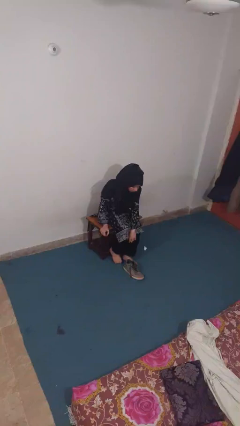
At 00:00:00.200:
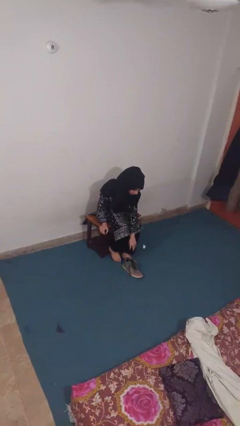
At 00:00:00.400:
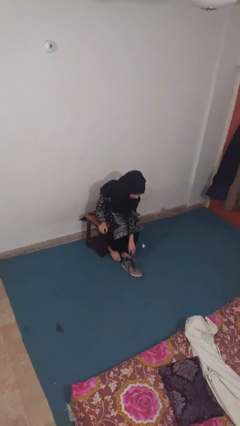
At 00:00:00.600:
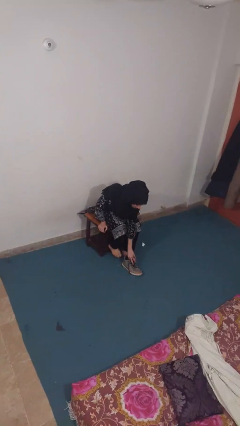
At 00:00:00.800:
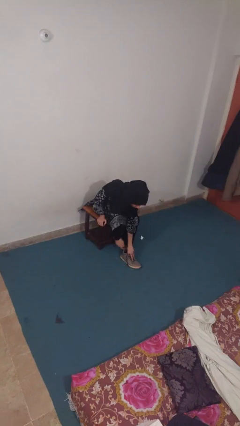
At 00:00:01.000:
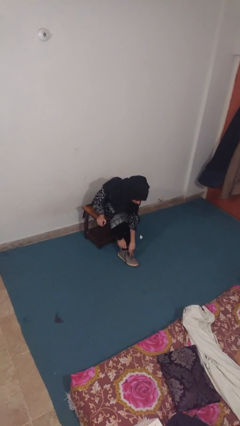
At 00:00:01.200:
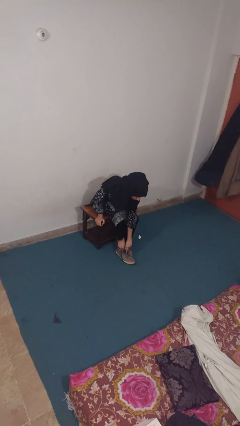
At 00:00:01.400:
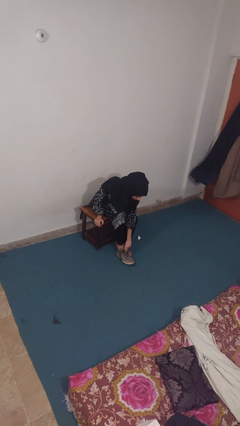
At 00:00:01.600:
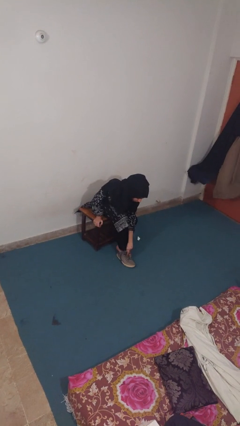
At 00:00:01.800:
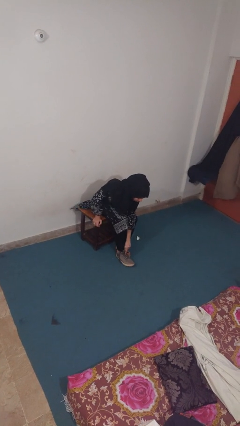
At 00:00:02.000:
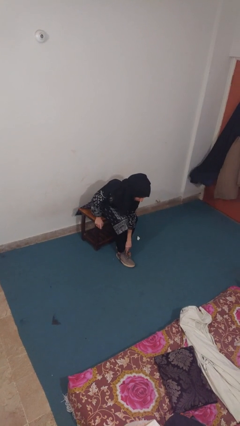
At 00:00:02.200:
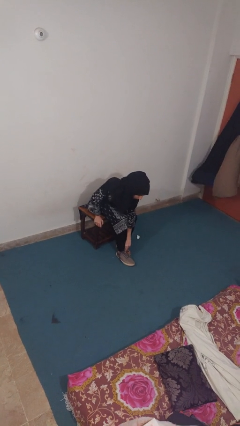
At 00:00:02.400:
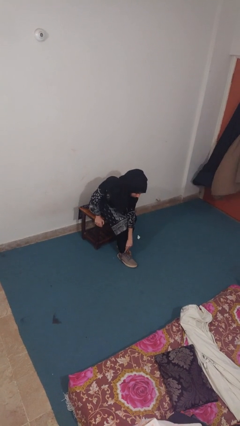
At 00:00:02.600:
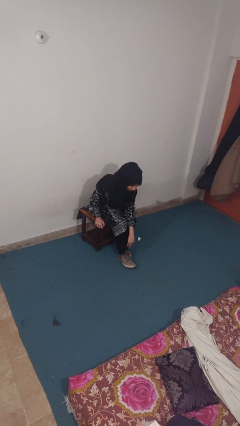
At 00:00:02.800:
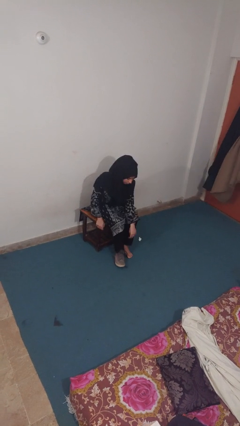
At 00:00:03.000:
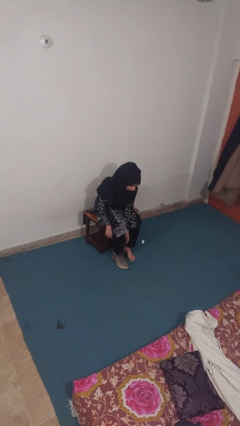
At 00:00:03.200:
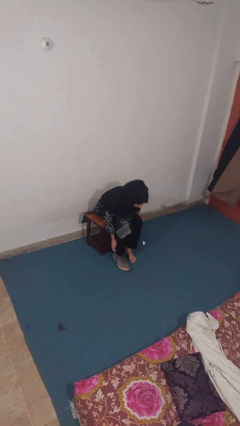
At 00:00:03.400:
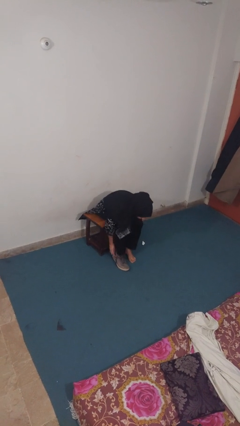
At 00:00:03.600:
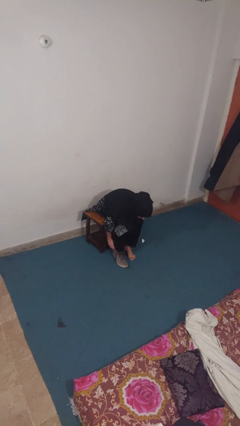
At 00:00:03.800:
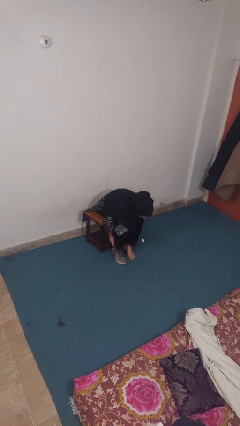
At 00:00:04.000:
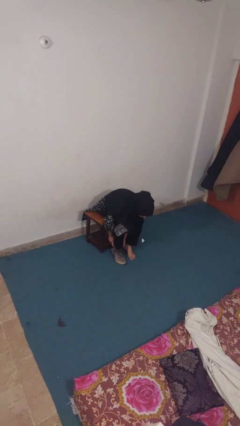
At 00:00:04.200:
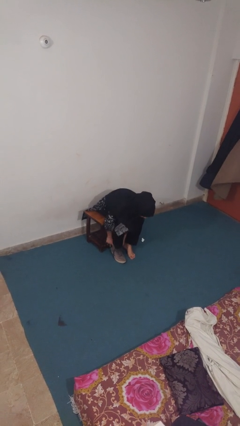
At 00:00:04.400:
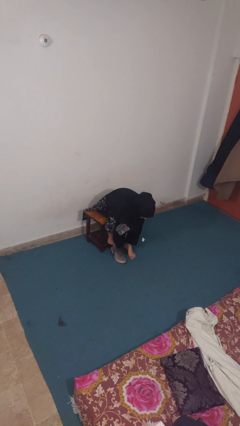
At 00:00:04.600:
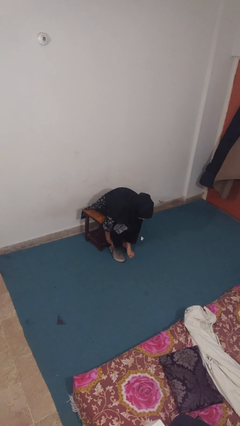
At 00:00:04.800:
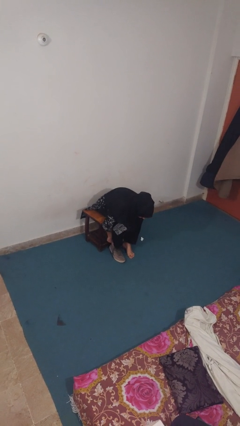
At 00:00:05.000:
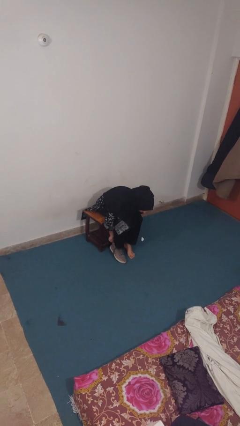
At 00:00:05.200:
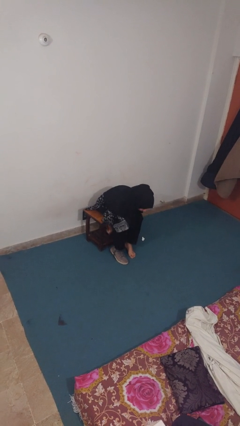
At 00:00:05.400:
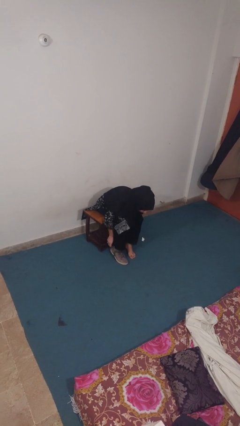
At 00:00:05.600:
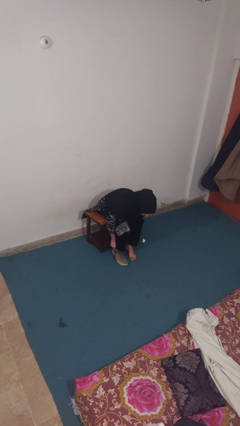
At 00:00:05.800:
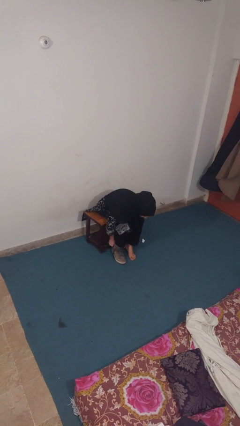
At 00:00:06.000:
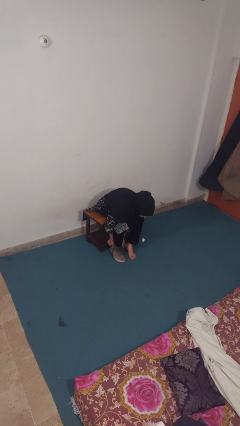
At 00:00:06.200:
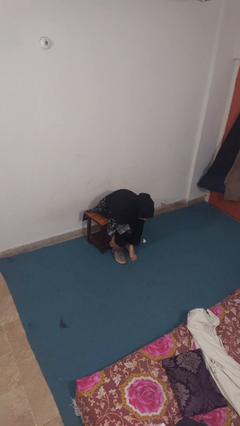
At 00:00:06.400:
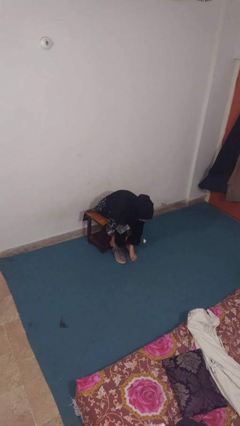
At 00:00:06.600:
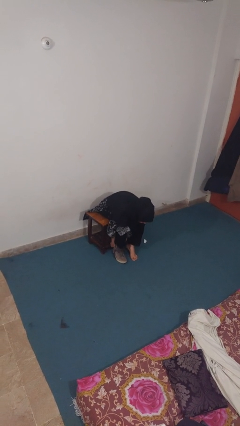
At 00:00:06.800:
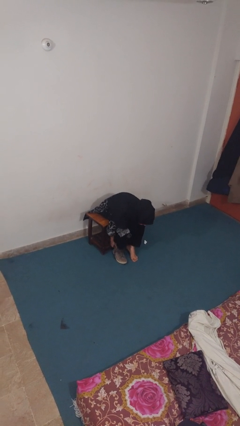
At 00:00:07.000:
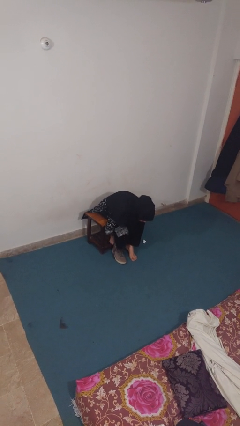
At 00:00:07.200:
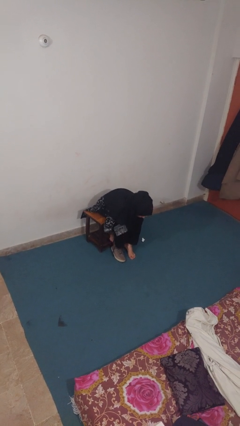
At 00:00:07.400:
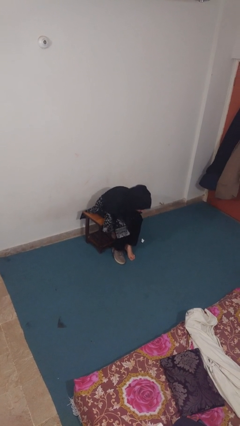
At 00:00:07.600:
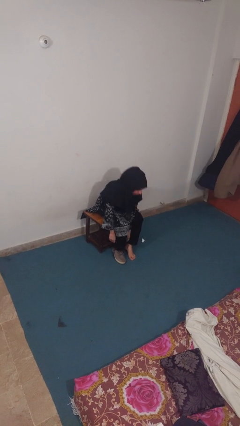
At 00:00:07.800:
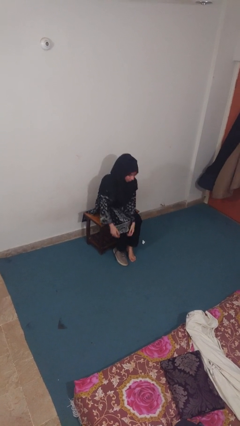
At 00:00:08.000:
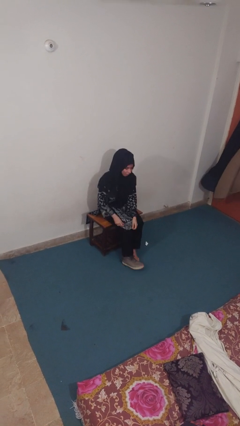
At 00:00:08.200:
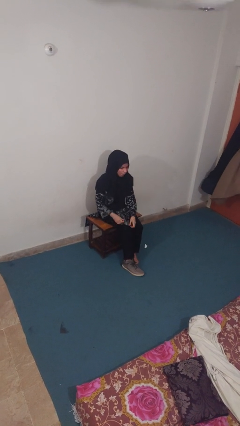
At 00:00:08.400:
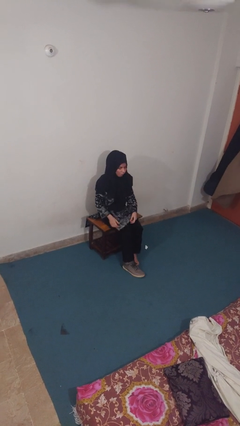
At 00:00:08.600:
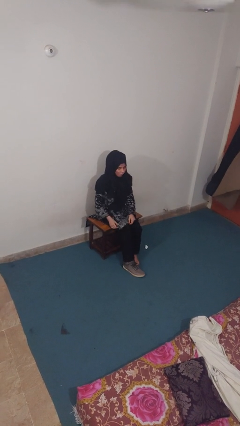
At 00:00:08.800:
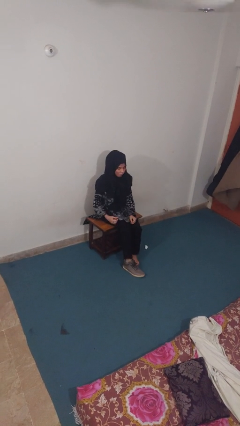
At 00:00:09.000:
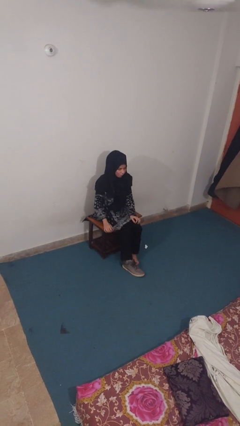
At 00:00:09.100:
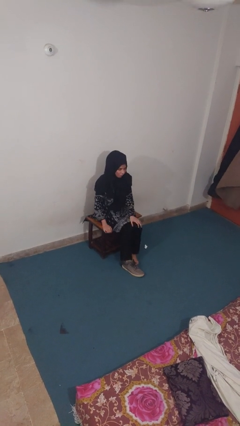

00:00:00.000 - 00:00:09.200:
person puts on boots

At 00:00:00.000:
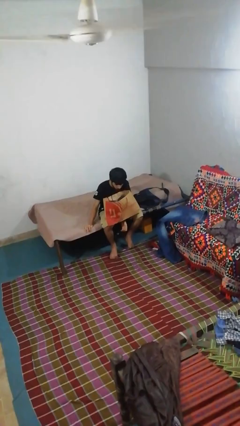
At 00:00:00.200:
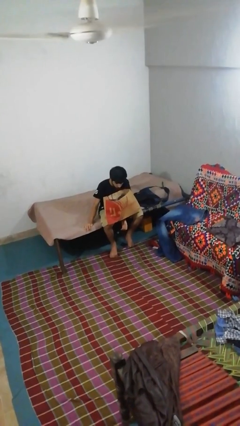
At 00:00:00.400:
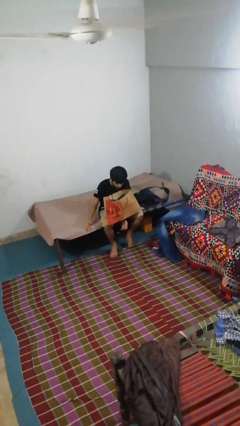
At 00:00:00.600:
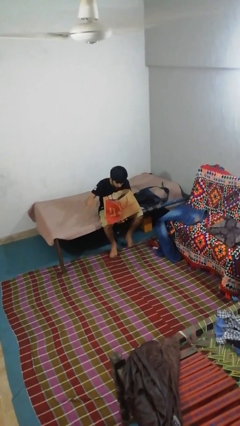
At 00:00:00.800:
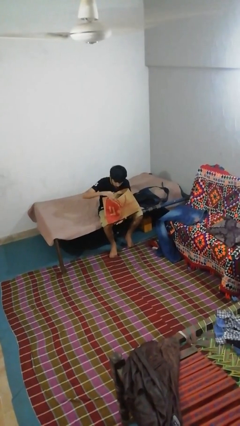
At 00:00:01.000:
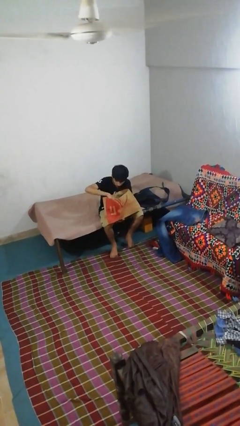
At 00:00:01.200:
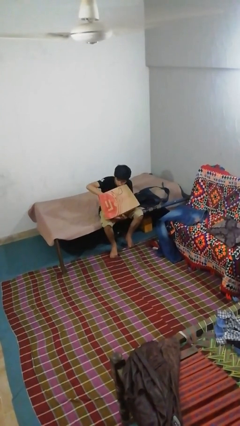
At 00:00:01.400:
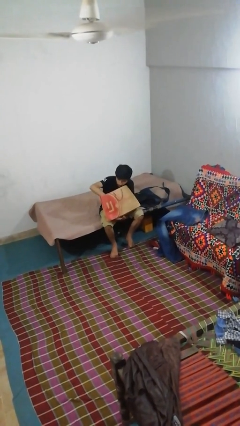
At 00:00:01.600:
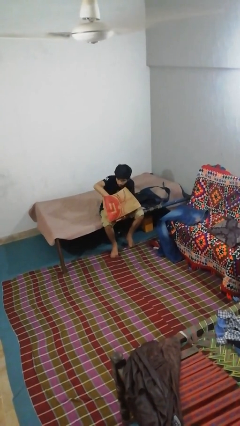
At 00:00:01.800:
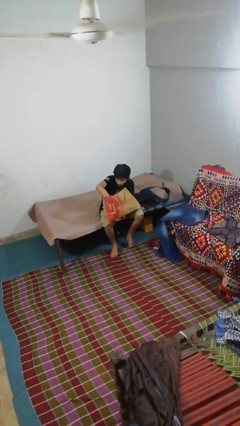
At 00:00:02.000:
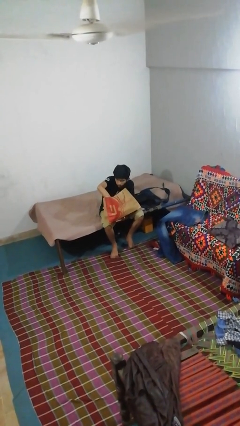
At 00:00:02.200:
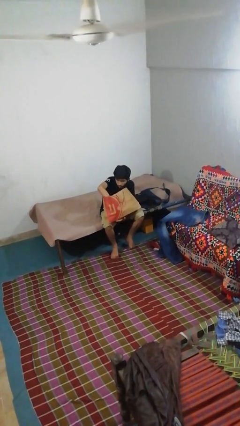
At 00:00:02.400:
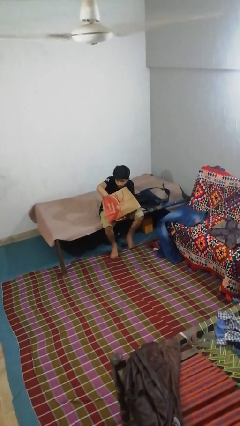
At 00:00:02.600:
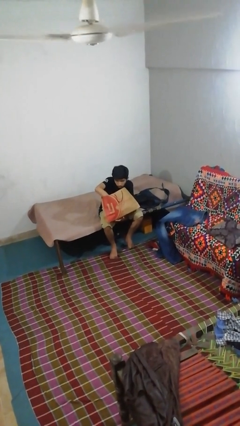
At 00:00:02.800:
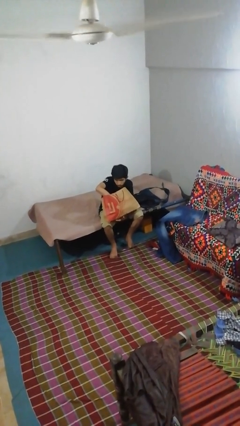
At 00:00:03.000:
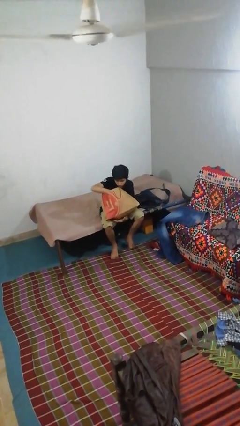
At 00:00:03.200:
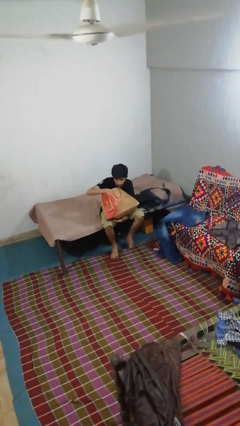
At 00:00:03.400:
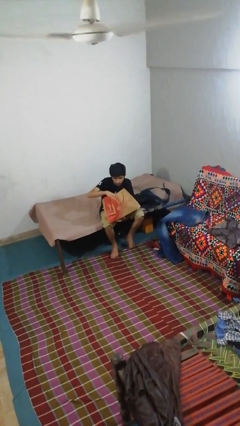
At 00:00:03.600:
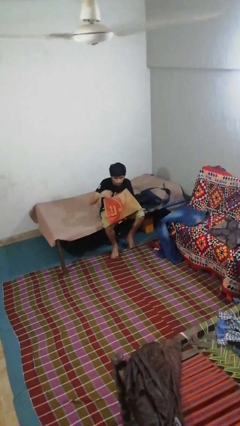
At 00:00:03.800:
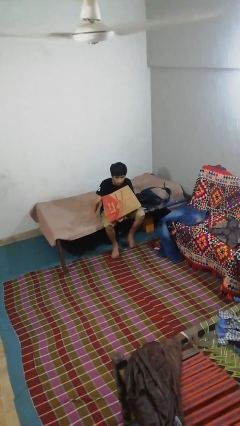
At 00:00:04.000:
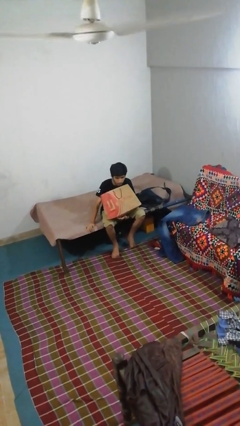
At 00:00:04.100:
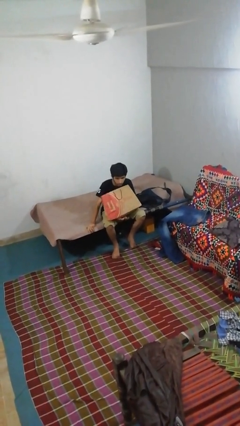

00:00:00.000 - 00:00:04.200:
person searches in bag

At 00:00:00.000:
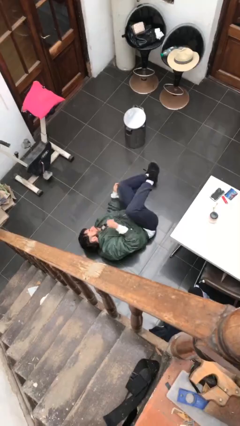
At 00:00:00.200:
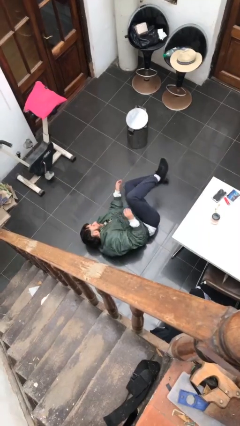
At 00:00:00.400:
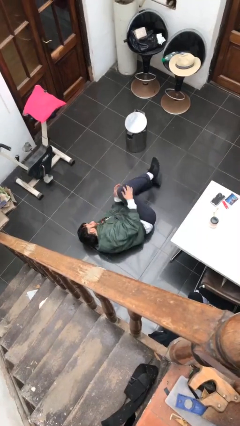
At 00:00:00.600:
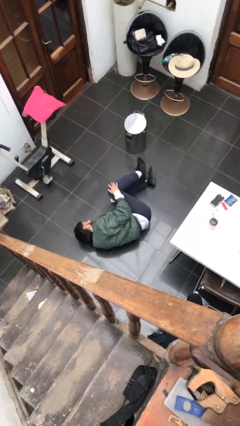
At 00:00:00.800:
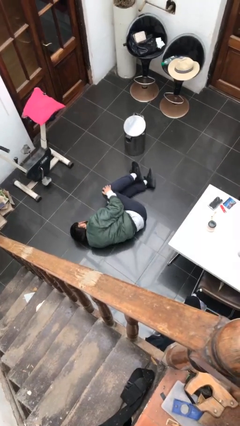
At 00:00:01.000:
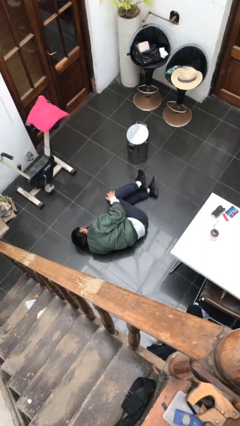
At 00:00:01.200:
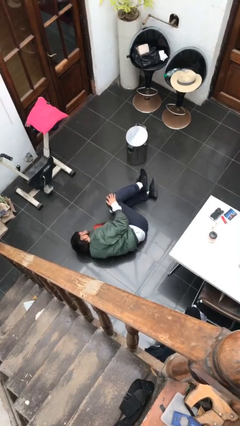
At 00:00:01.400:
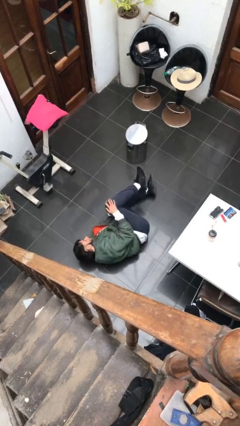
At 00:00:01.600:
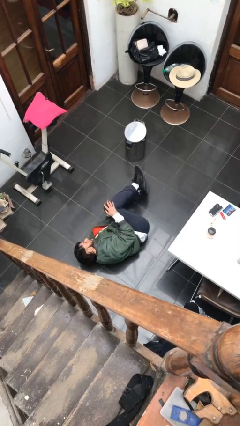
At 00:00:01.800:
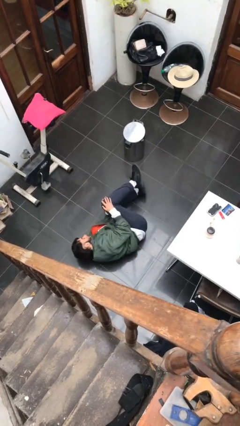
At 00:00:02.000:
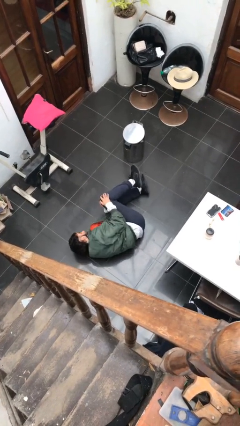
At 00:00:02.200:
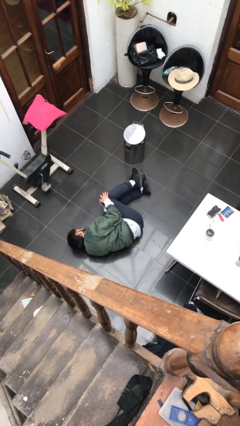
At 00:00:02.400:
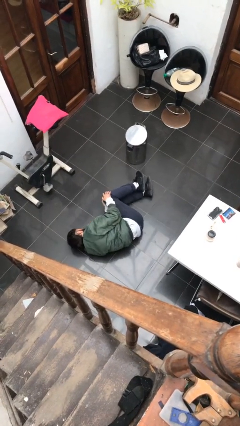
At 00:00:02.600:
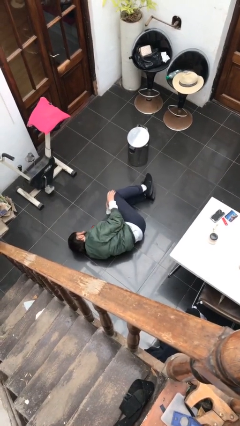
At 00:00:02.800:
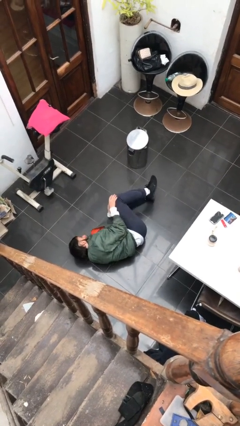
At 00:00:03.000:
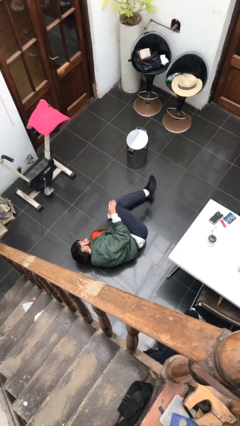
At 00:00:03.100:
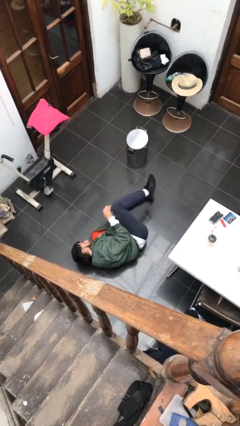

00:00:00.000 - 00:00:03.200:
person lies down on floor

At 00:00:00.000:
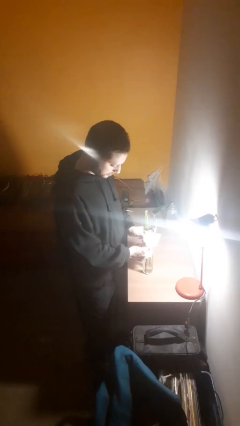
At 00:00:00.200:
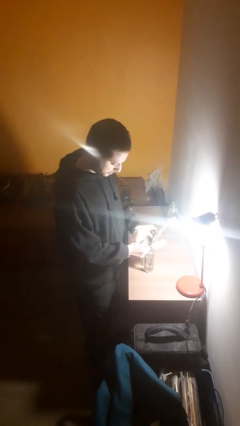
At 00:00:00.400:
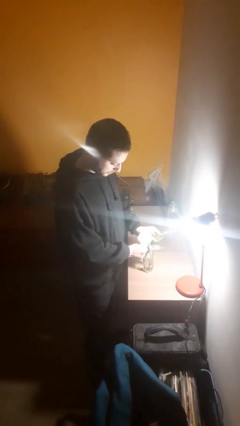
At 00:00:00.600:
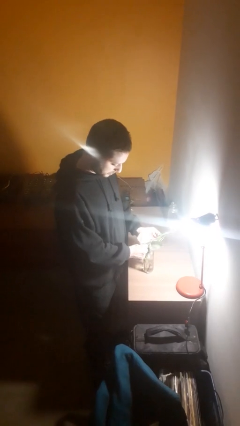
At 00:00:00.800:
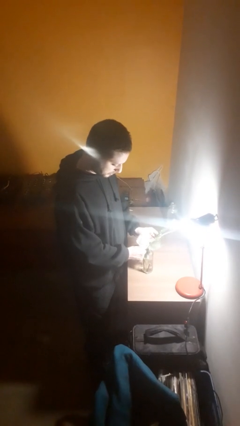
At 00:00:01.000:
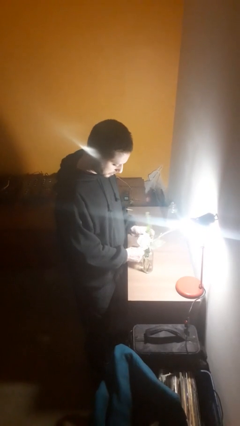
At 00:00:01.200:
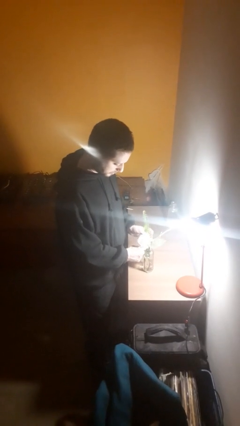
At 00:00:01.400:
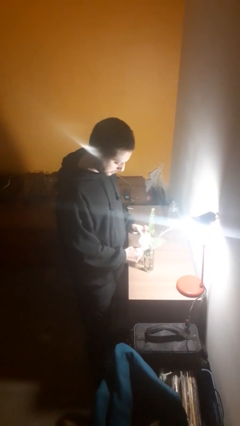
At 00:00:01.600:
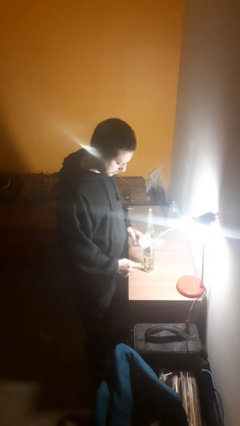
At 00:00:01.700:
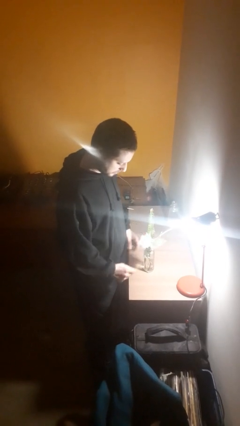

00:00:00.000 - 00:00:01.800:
person arranges flowers in vase
